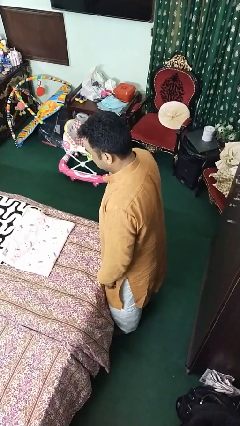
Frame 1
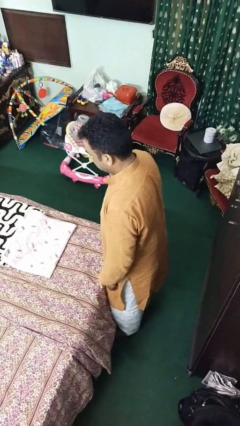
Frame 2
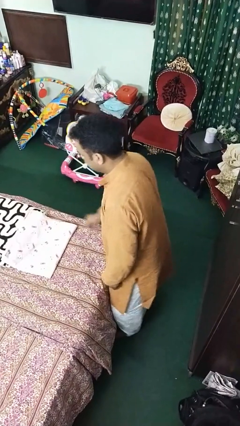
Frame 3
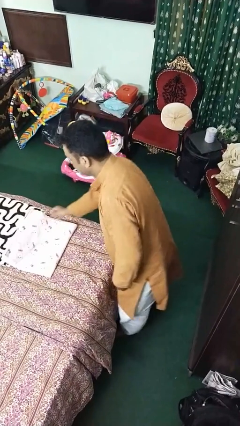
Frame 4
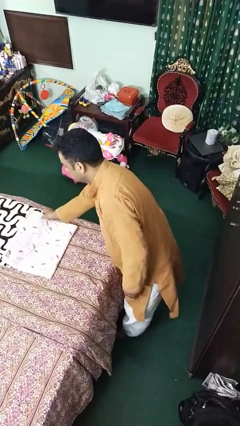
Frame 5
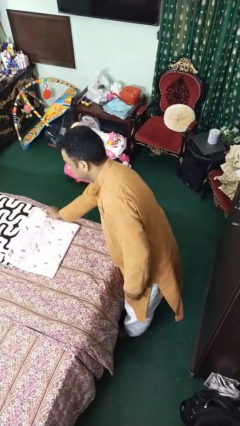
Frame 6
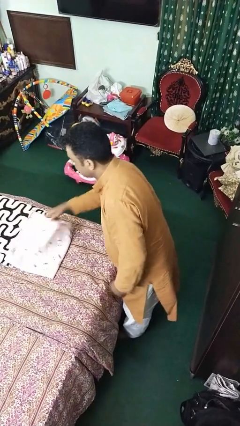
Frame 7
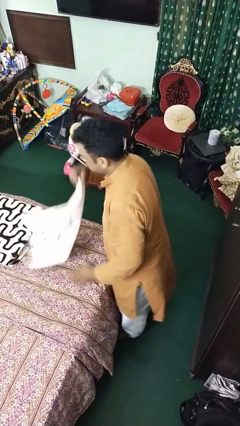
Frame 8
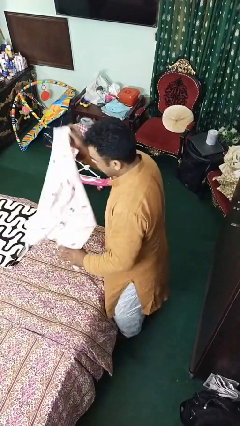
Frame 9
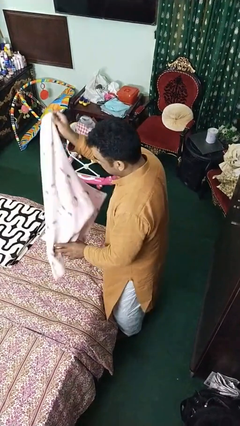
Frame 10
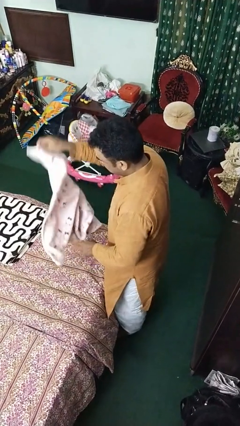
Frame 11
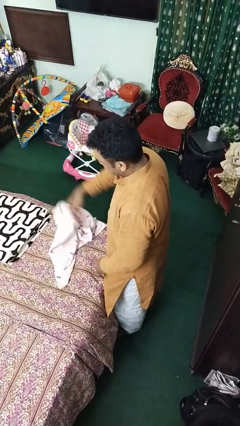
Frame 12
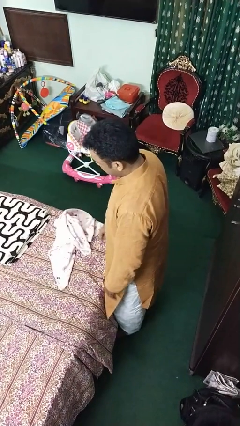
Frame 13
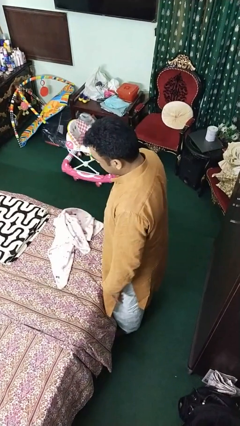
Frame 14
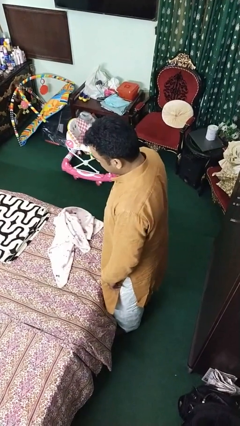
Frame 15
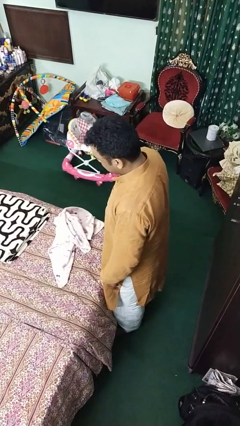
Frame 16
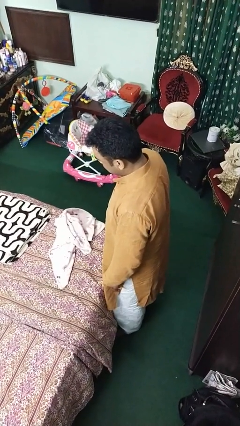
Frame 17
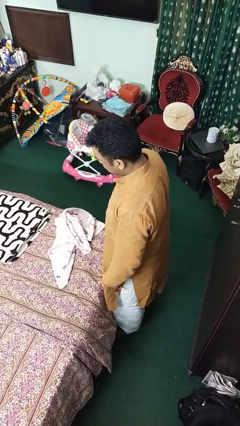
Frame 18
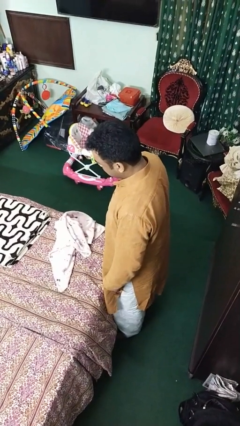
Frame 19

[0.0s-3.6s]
person unfolds blanket

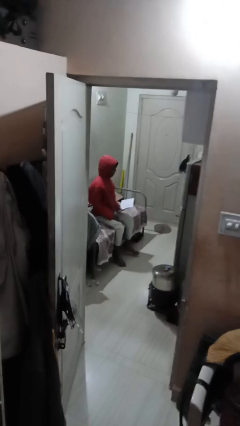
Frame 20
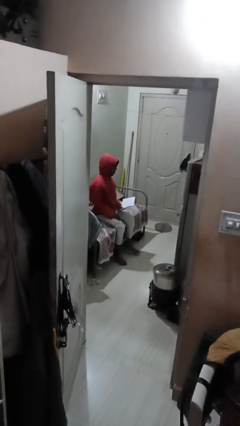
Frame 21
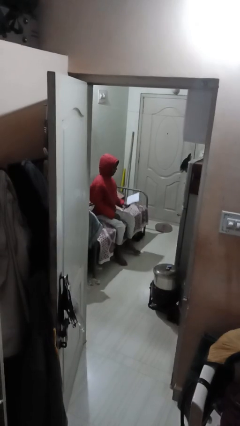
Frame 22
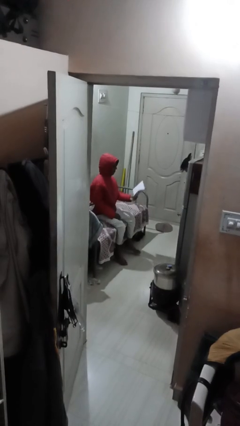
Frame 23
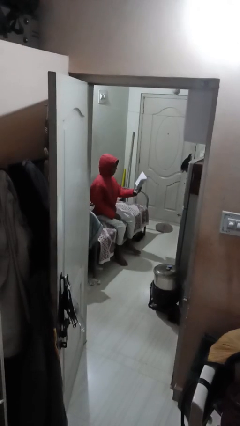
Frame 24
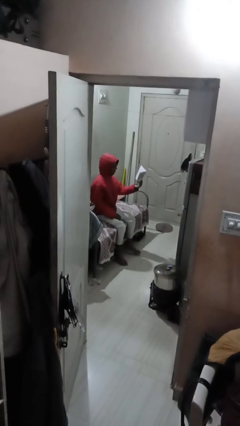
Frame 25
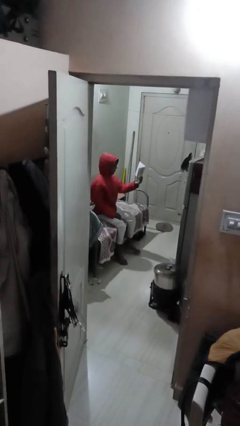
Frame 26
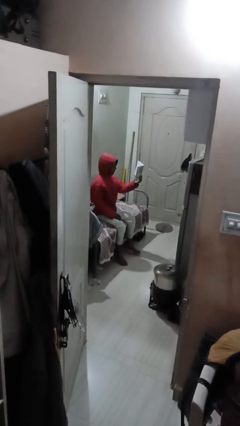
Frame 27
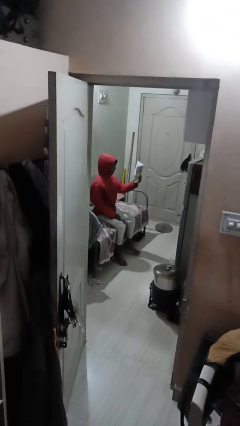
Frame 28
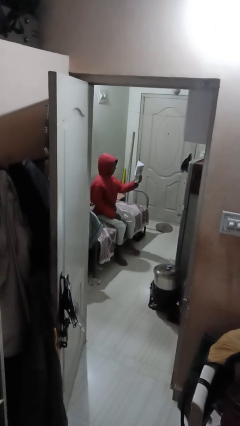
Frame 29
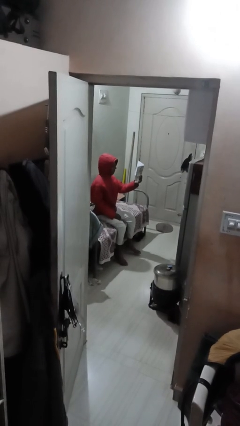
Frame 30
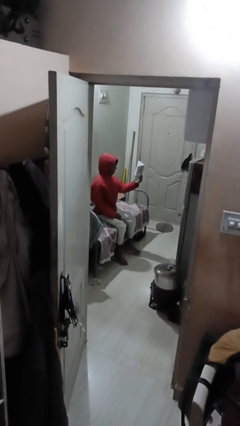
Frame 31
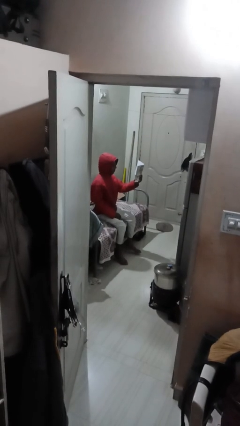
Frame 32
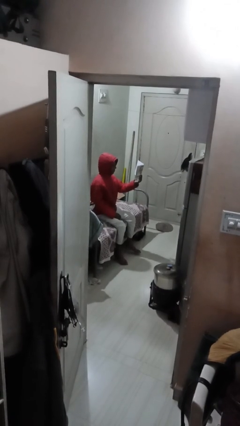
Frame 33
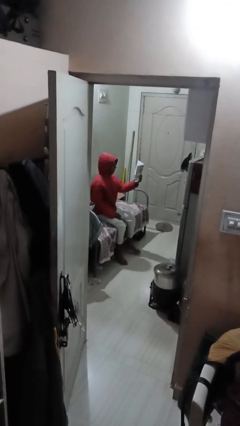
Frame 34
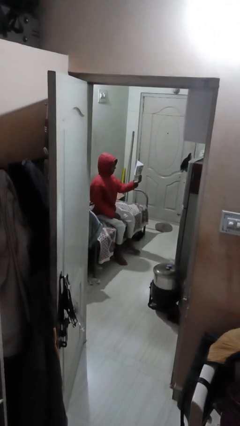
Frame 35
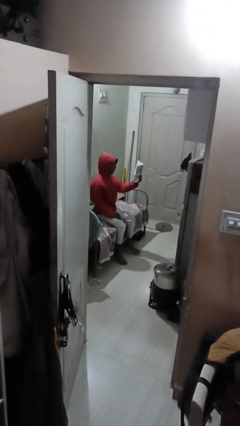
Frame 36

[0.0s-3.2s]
person reads document

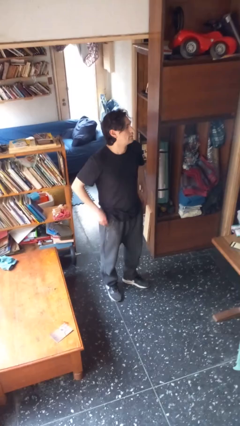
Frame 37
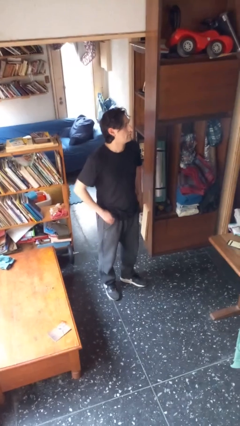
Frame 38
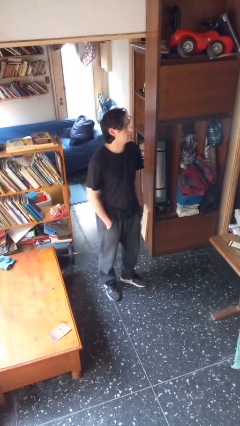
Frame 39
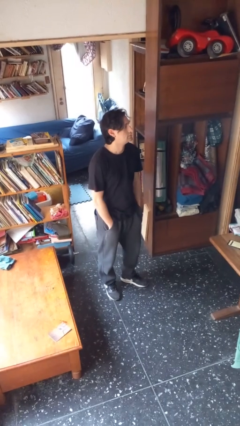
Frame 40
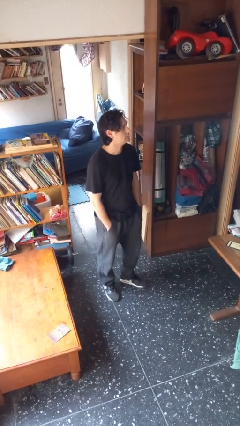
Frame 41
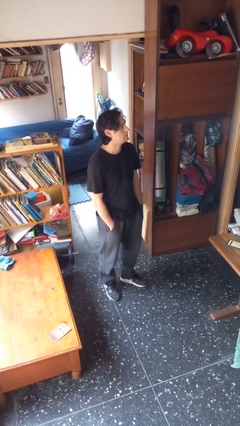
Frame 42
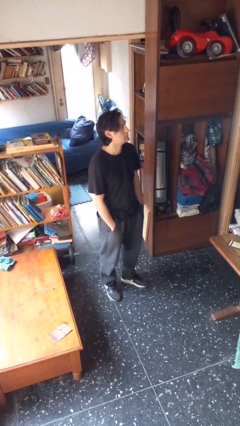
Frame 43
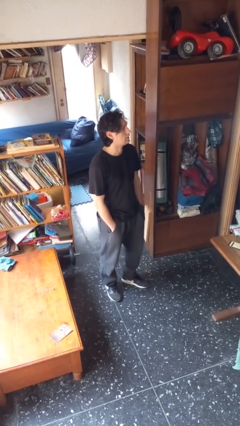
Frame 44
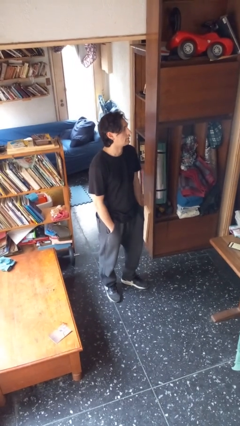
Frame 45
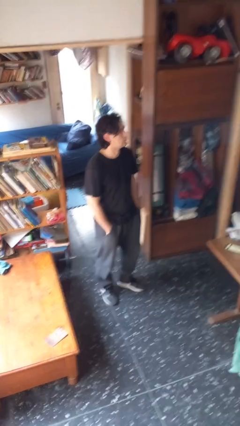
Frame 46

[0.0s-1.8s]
person puts hands in back pockets

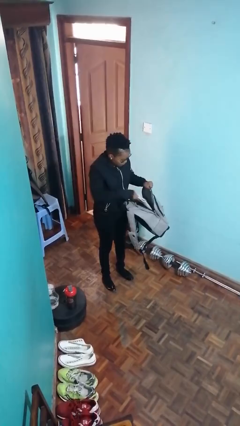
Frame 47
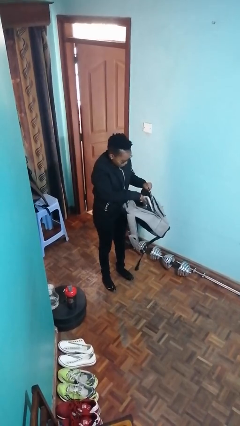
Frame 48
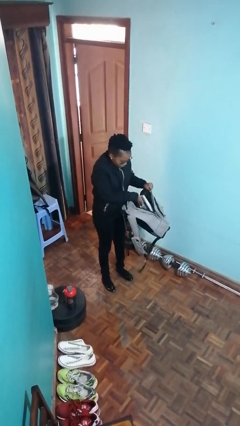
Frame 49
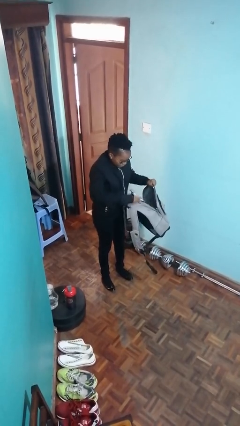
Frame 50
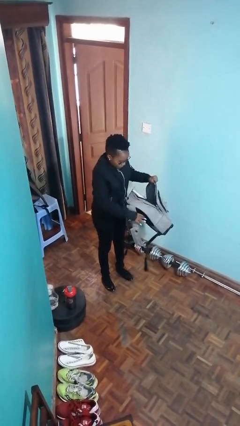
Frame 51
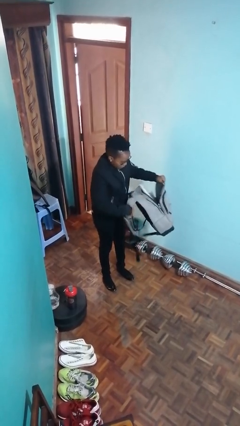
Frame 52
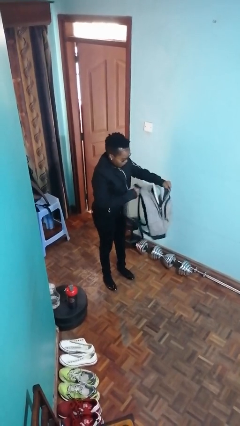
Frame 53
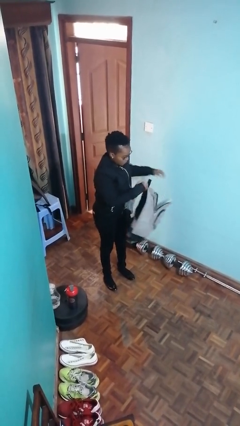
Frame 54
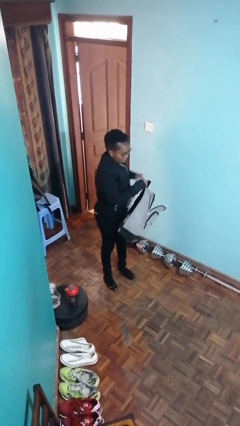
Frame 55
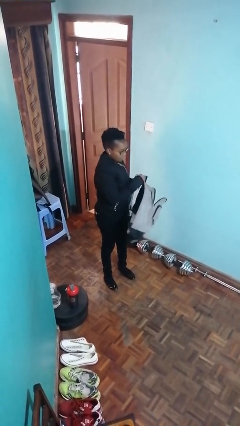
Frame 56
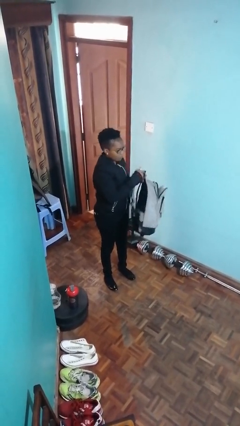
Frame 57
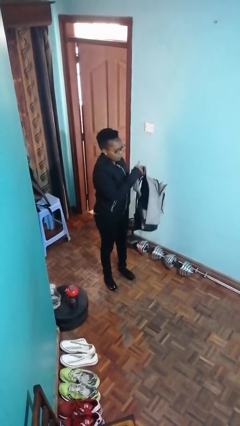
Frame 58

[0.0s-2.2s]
person puts object into backpack

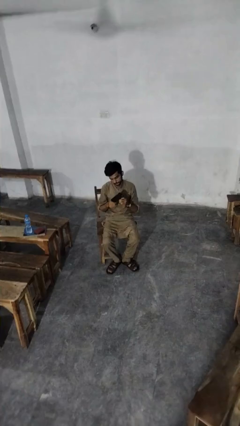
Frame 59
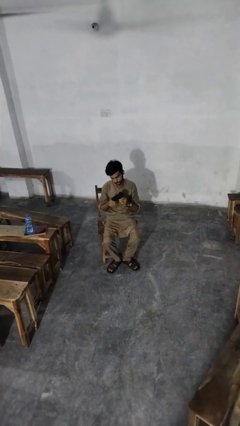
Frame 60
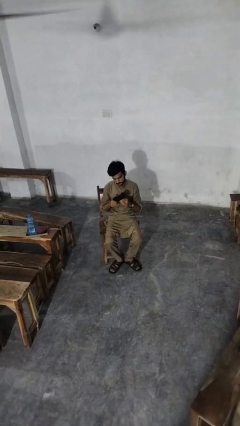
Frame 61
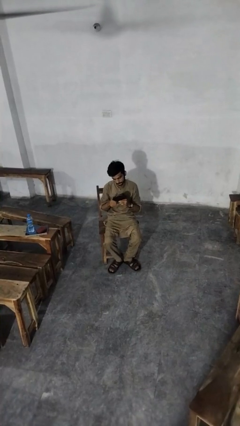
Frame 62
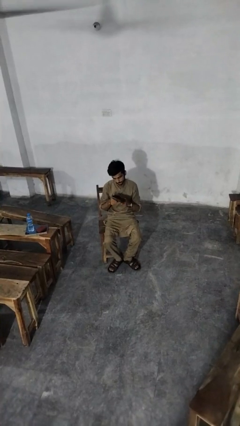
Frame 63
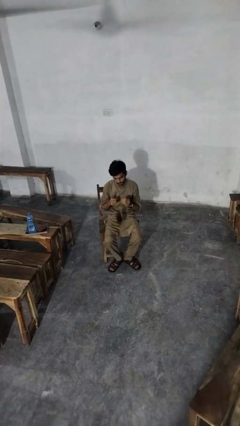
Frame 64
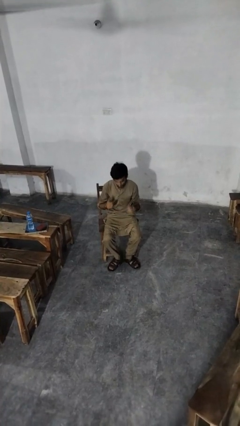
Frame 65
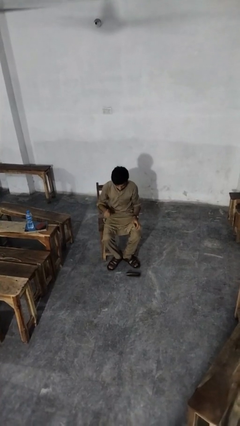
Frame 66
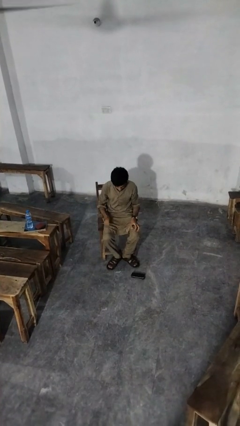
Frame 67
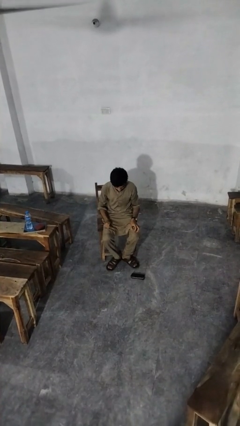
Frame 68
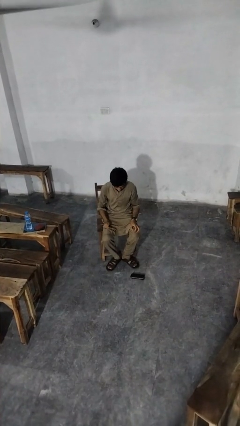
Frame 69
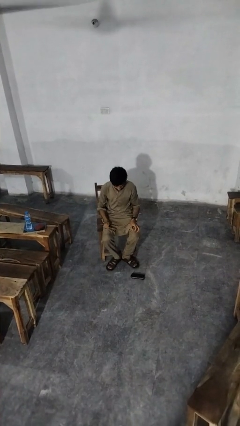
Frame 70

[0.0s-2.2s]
person drops object

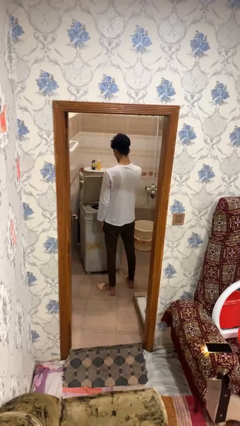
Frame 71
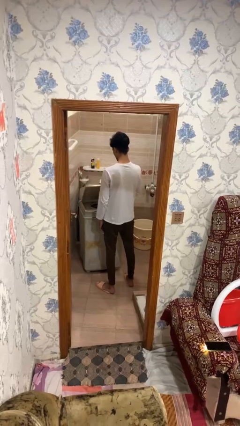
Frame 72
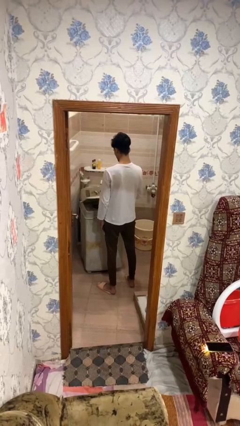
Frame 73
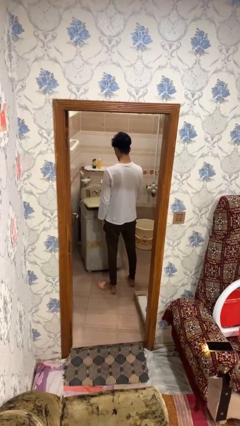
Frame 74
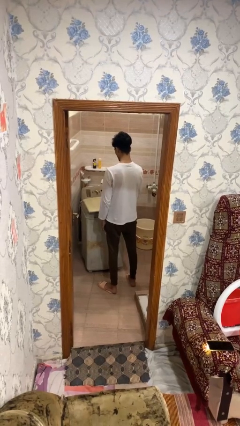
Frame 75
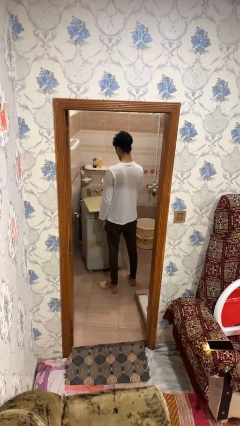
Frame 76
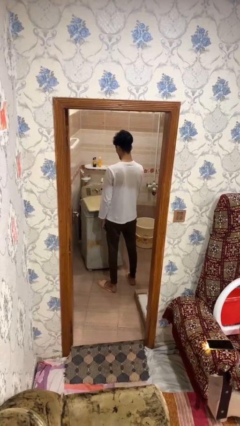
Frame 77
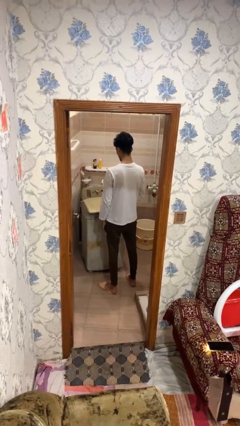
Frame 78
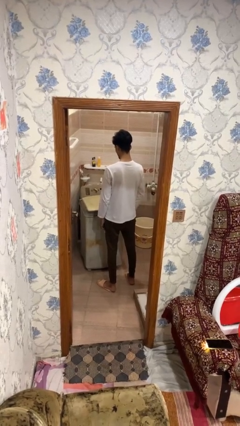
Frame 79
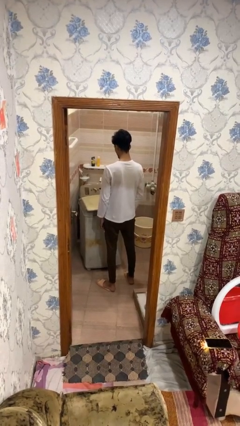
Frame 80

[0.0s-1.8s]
person closes clothes washer

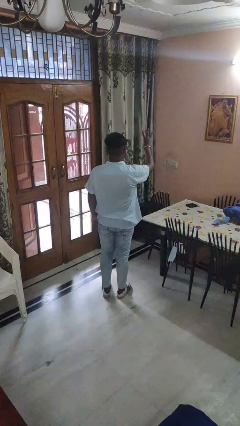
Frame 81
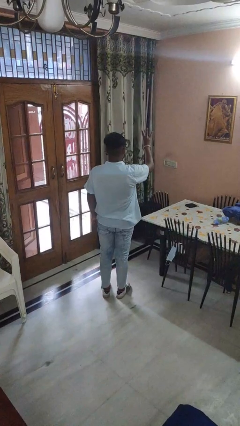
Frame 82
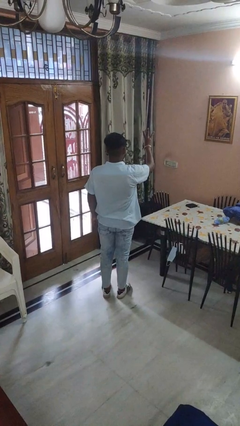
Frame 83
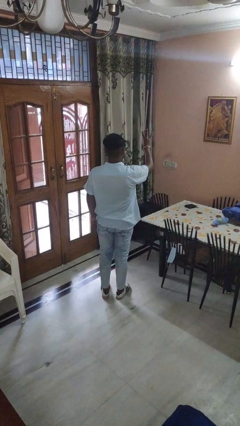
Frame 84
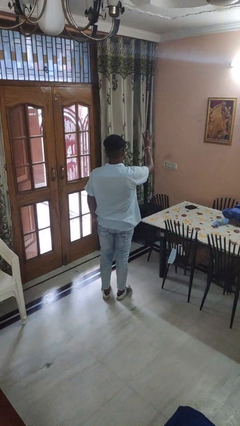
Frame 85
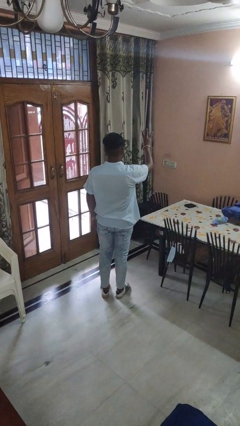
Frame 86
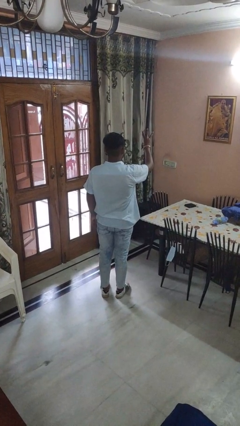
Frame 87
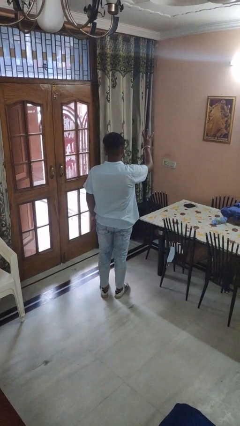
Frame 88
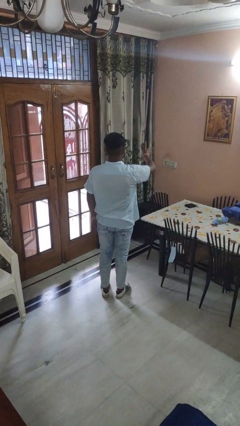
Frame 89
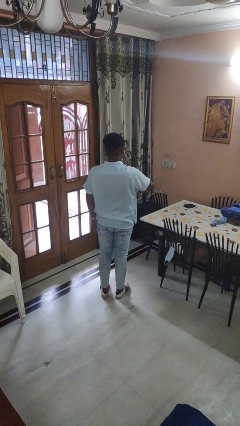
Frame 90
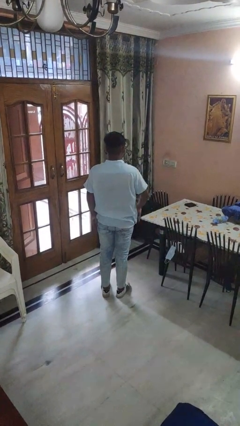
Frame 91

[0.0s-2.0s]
person gestures number three

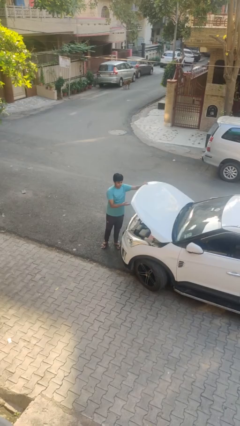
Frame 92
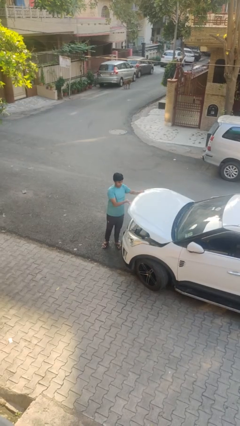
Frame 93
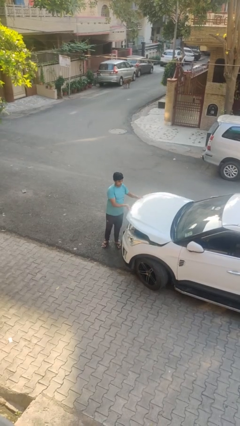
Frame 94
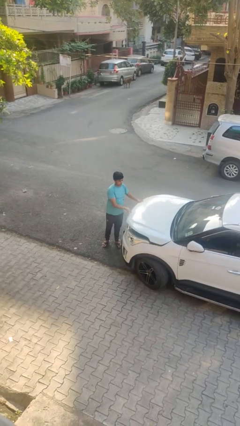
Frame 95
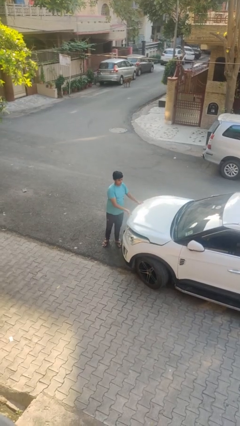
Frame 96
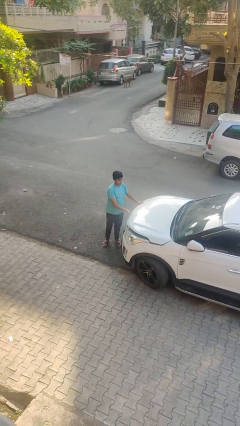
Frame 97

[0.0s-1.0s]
person closes car hood
